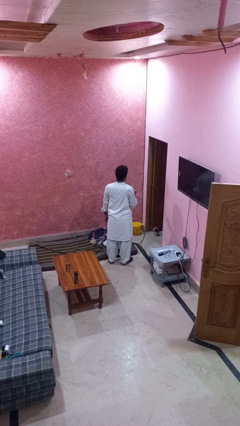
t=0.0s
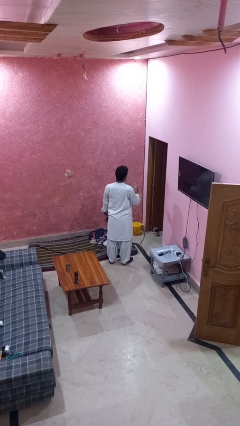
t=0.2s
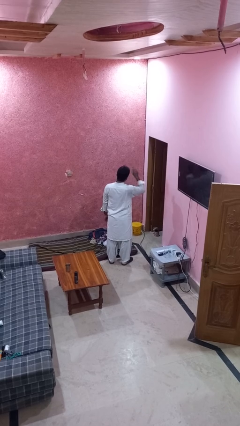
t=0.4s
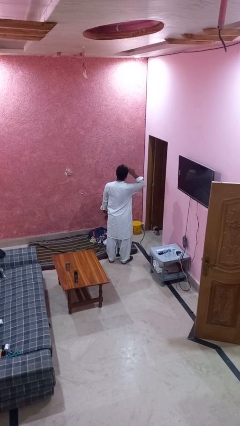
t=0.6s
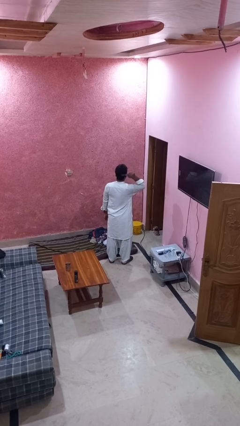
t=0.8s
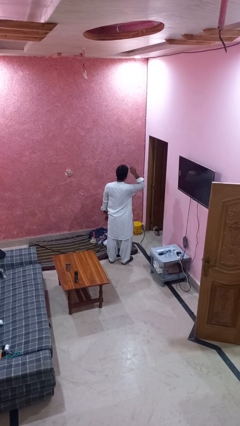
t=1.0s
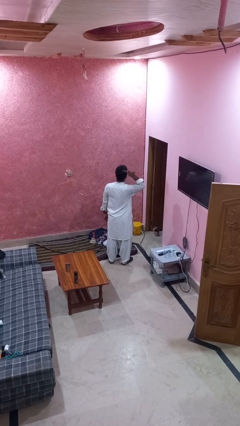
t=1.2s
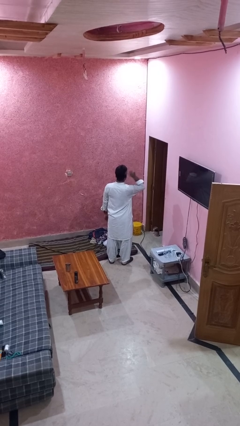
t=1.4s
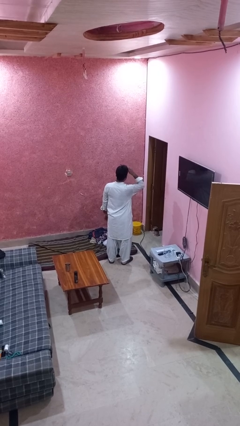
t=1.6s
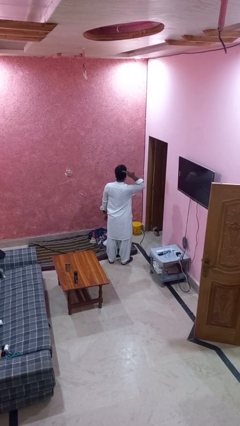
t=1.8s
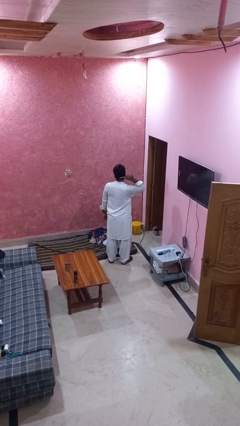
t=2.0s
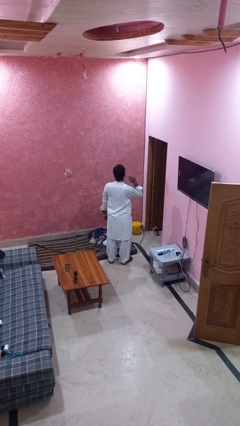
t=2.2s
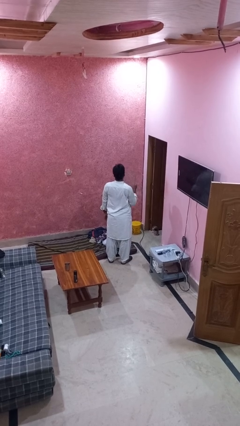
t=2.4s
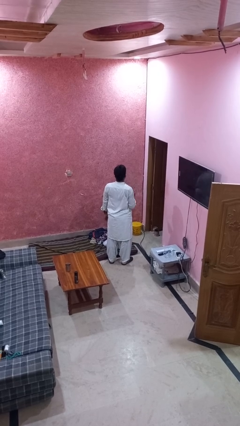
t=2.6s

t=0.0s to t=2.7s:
person brushes hair

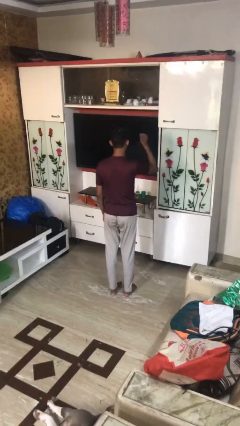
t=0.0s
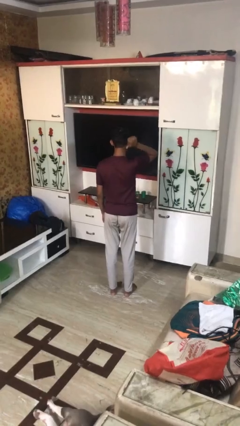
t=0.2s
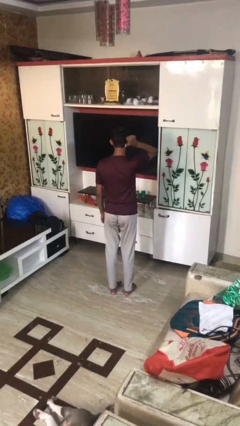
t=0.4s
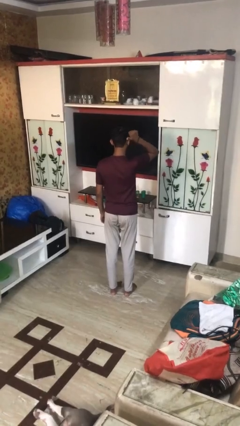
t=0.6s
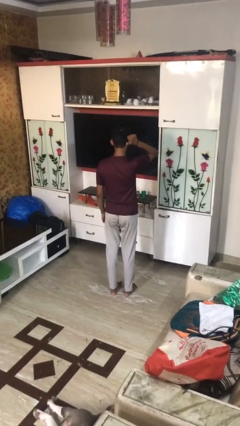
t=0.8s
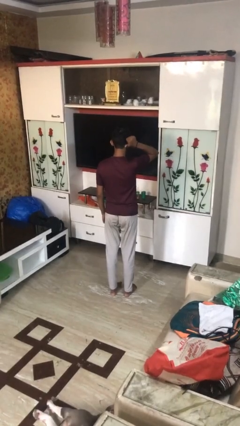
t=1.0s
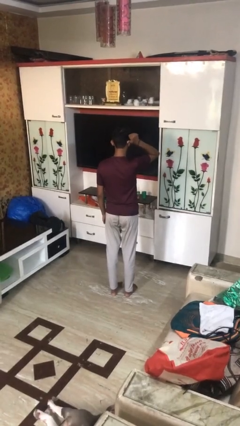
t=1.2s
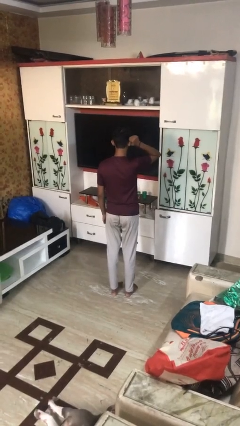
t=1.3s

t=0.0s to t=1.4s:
person gestures behind me

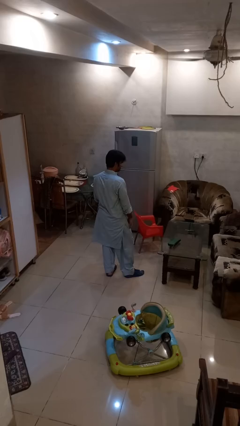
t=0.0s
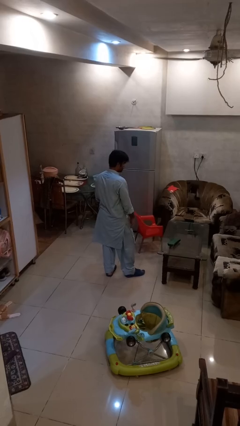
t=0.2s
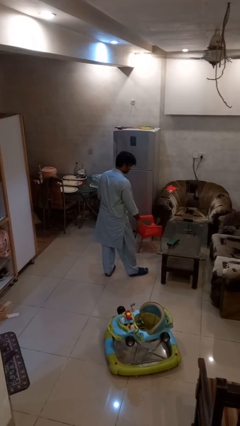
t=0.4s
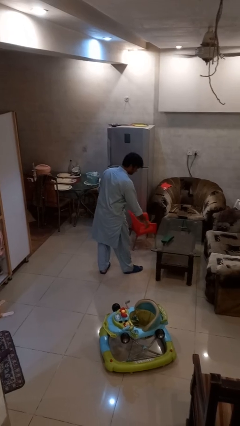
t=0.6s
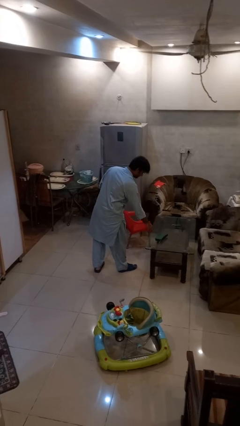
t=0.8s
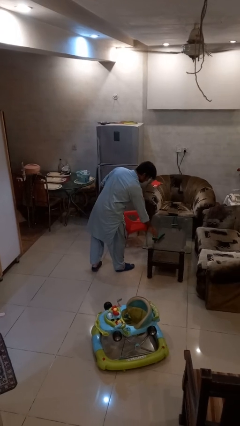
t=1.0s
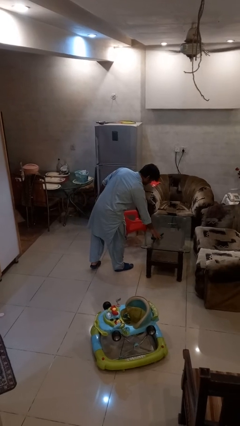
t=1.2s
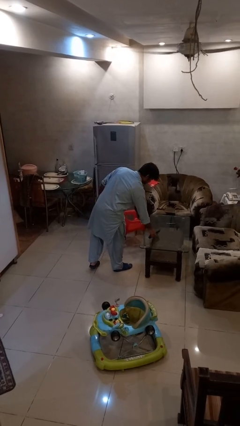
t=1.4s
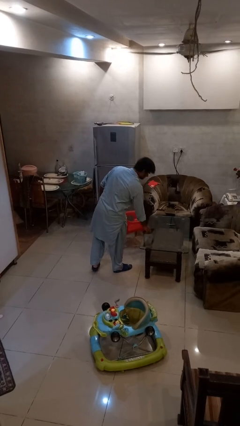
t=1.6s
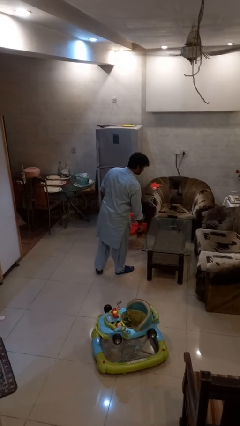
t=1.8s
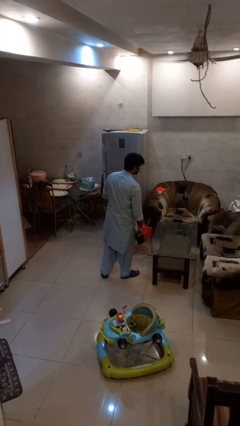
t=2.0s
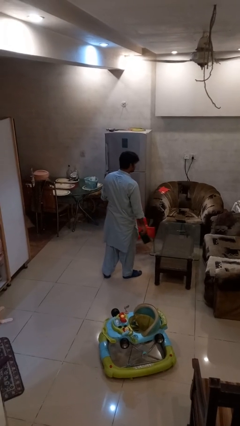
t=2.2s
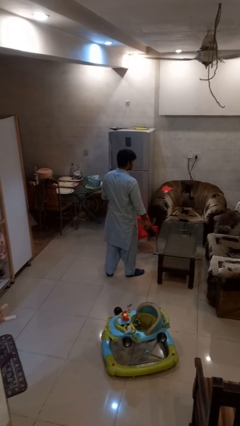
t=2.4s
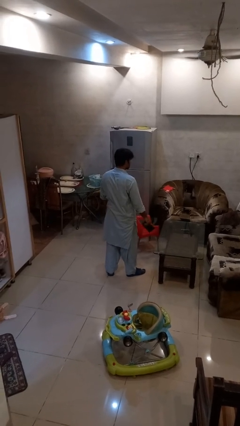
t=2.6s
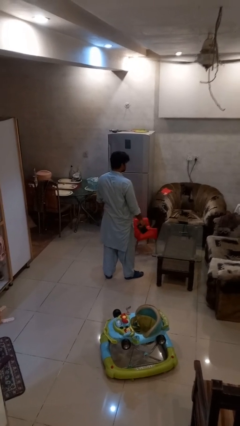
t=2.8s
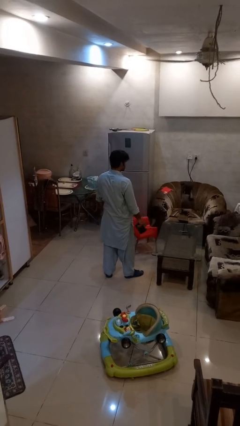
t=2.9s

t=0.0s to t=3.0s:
person picks up object from table

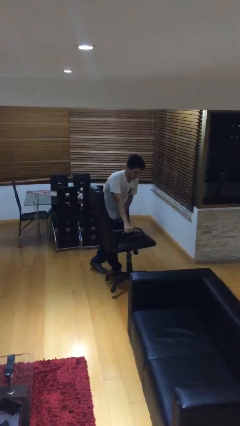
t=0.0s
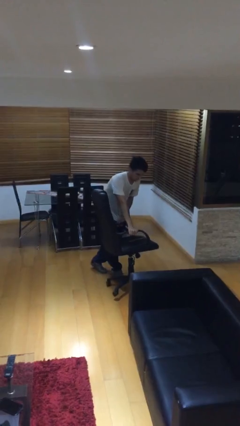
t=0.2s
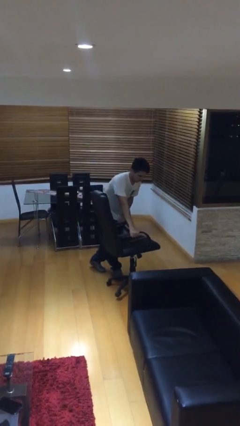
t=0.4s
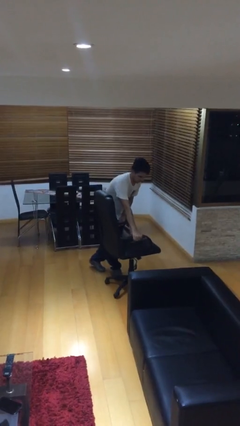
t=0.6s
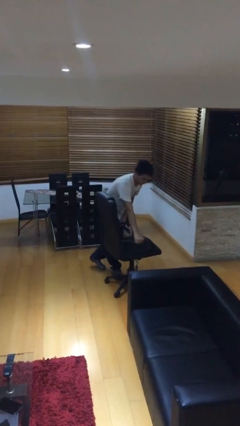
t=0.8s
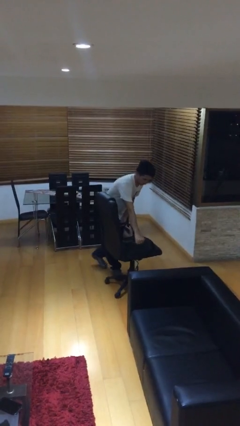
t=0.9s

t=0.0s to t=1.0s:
person puts down object on floor

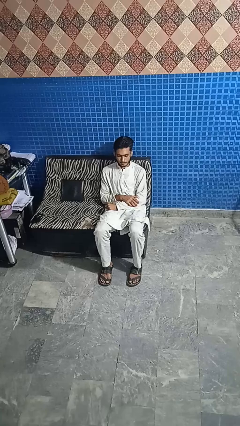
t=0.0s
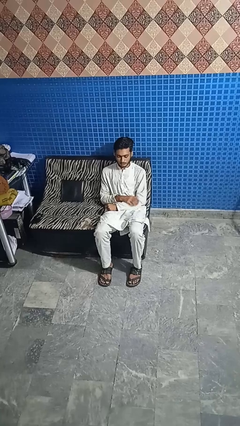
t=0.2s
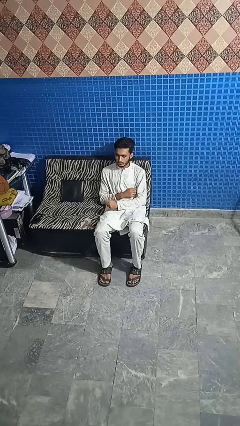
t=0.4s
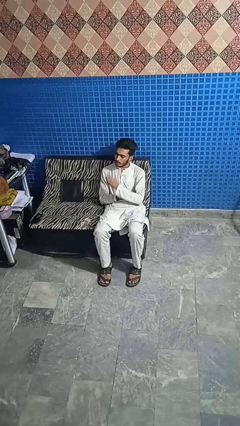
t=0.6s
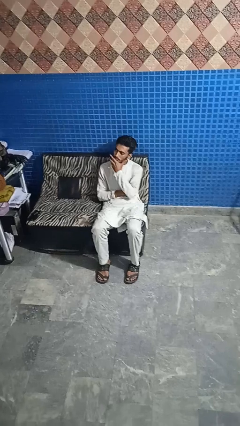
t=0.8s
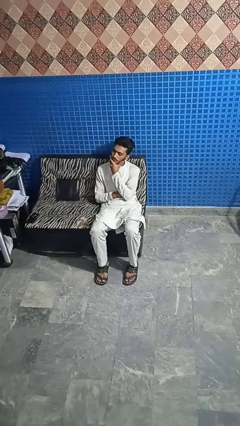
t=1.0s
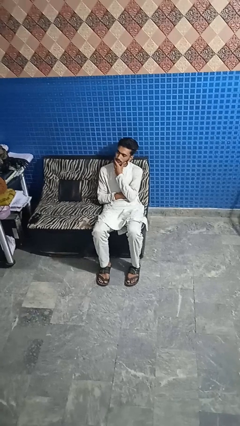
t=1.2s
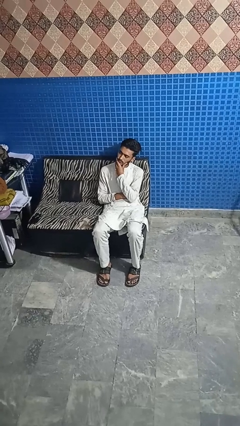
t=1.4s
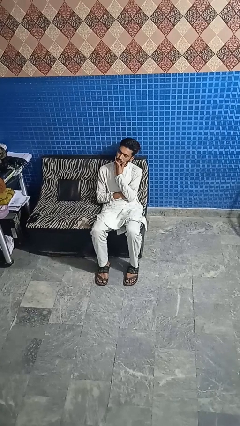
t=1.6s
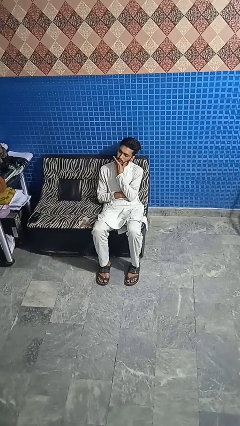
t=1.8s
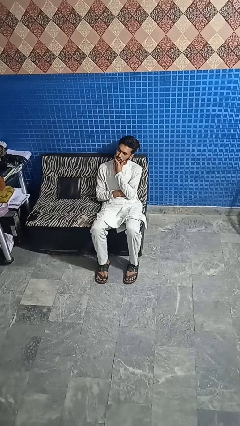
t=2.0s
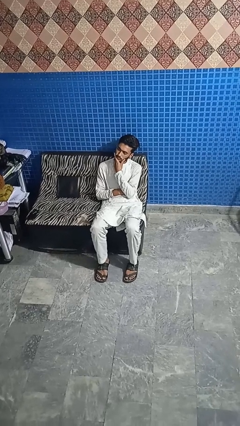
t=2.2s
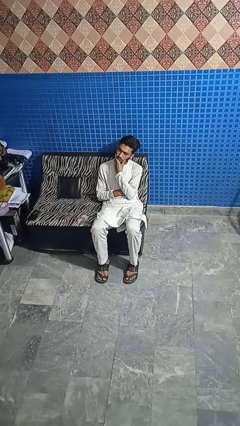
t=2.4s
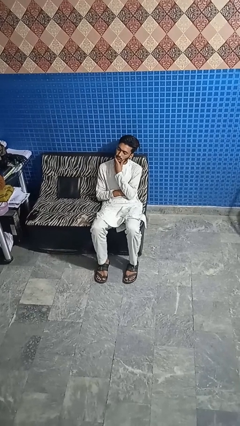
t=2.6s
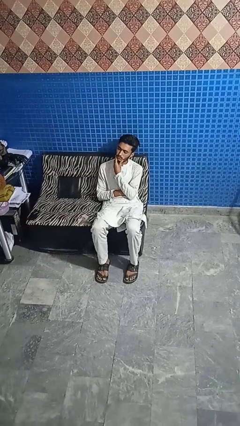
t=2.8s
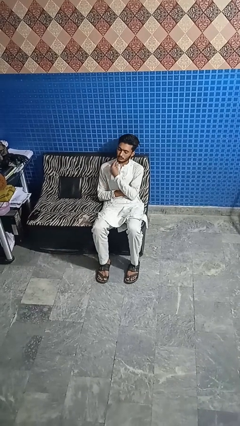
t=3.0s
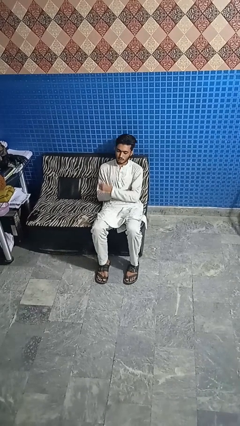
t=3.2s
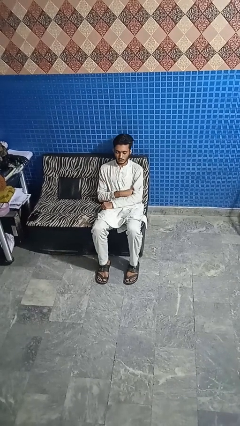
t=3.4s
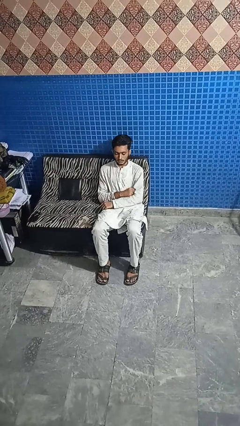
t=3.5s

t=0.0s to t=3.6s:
person strokes chin

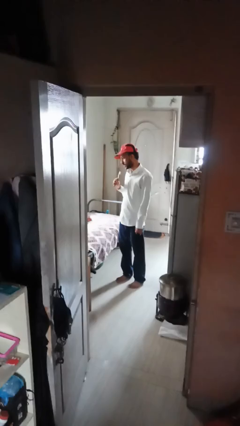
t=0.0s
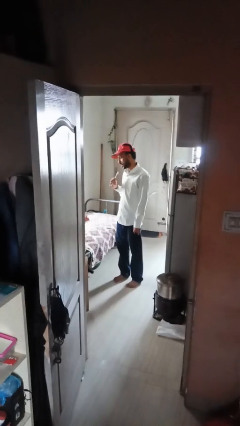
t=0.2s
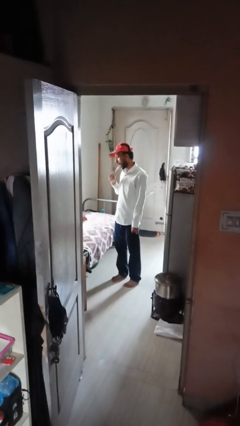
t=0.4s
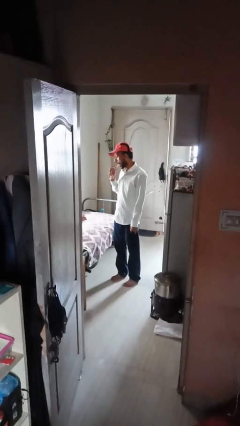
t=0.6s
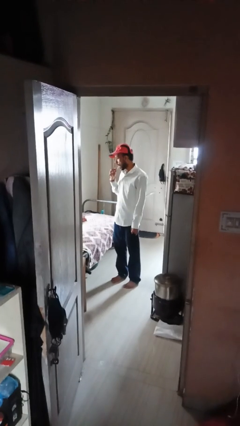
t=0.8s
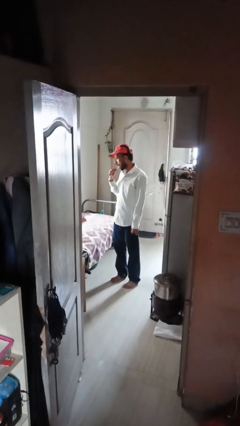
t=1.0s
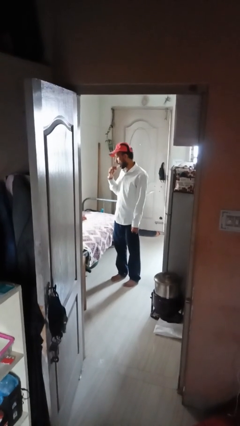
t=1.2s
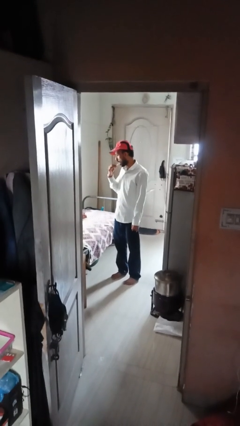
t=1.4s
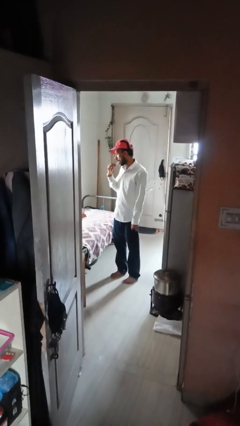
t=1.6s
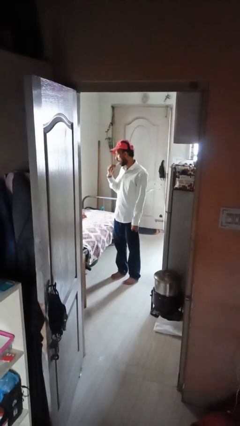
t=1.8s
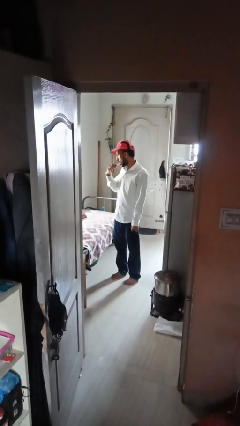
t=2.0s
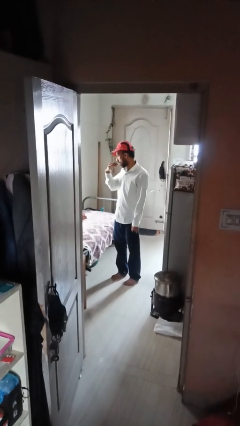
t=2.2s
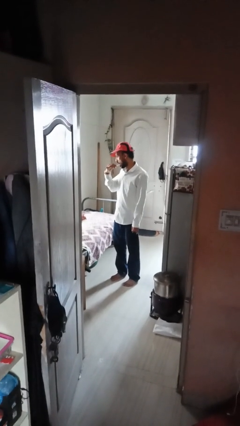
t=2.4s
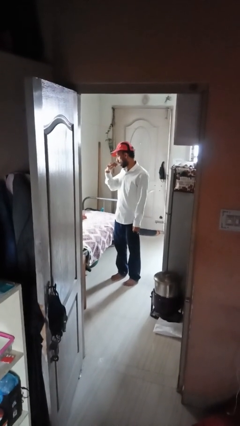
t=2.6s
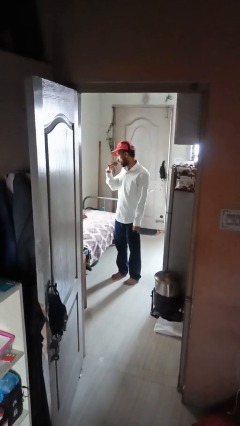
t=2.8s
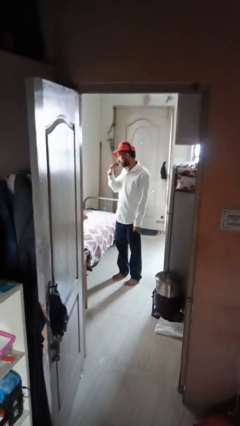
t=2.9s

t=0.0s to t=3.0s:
person brushes teeth

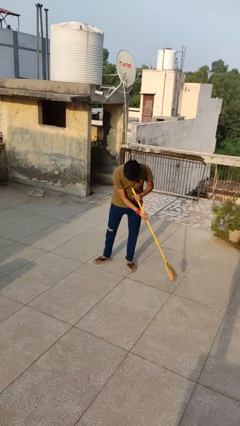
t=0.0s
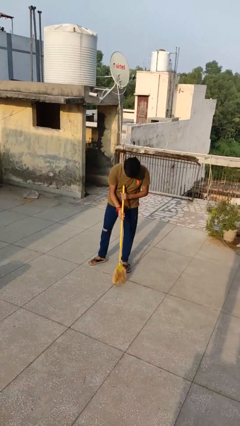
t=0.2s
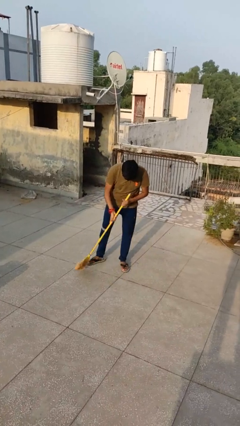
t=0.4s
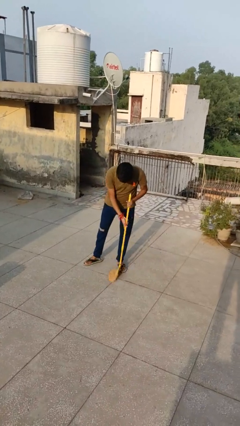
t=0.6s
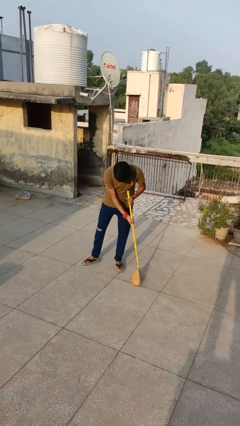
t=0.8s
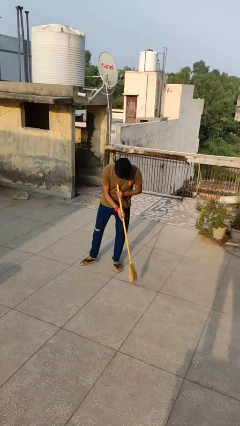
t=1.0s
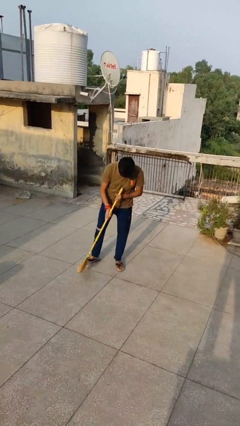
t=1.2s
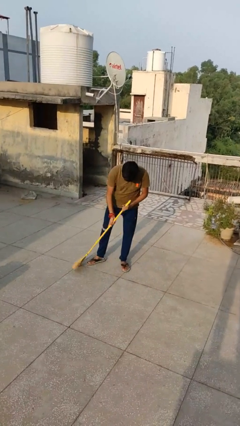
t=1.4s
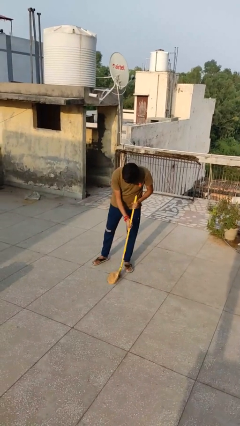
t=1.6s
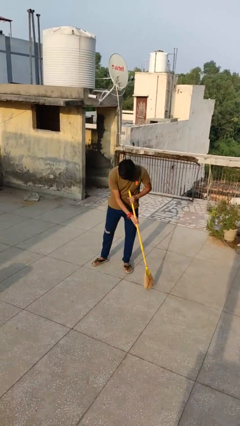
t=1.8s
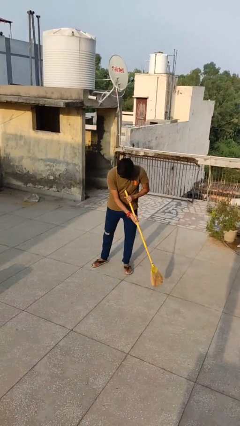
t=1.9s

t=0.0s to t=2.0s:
person sweeps floor
